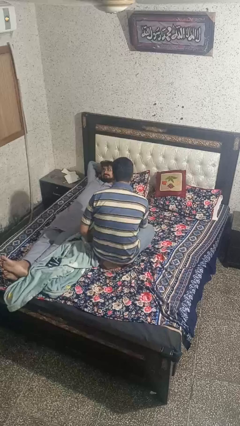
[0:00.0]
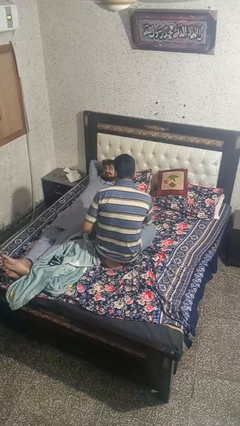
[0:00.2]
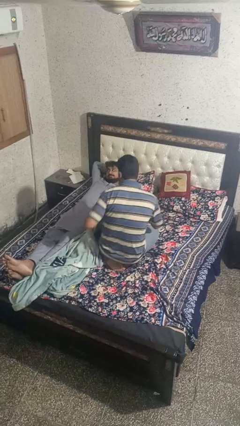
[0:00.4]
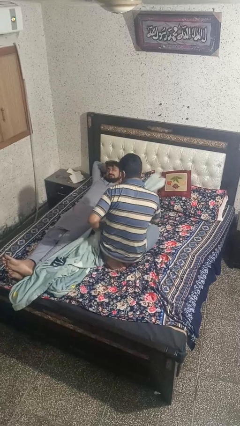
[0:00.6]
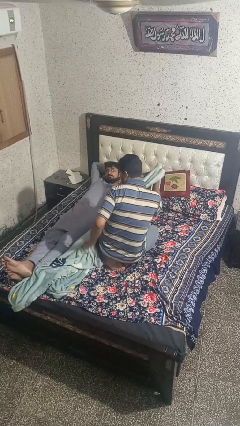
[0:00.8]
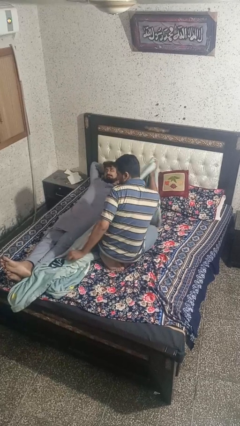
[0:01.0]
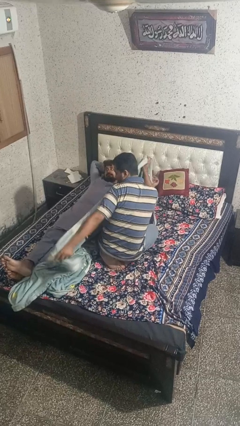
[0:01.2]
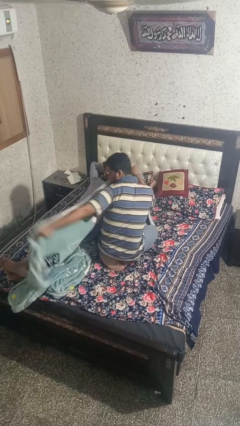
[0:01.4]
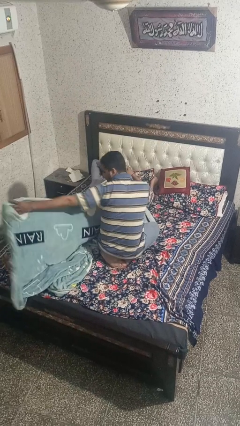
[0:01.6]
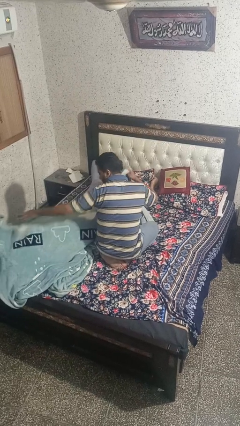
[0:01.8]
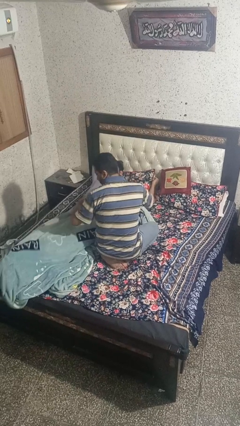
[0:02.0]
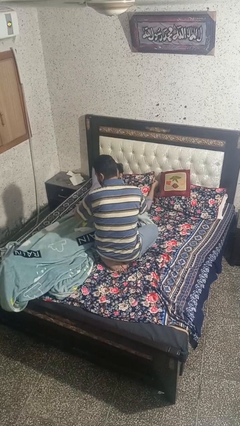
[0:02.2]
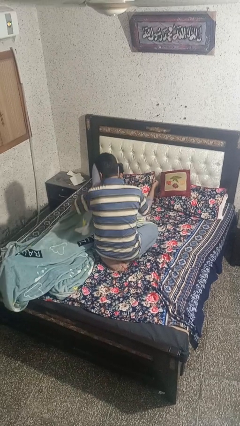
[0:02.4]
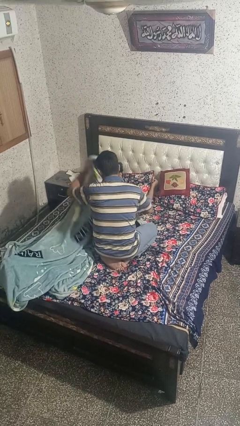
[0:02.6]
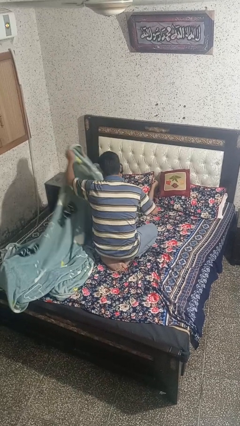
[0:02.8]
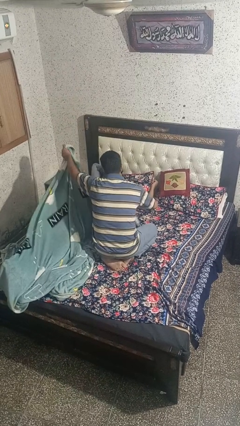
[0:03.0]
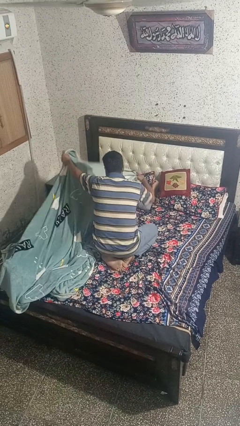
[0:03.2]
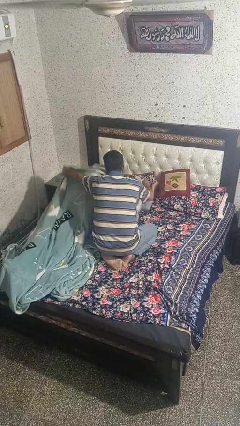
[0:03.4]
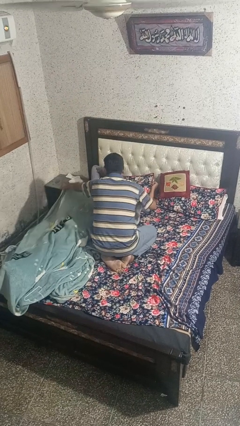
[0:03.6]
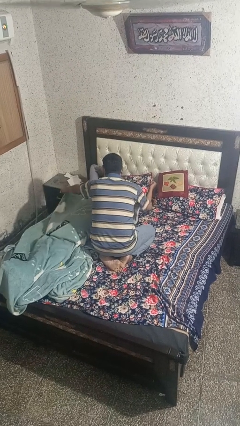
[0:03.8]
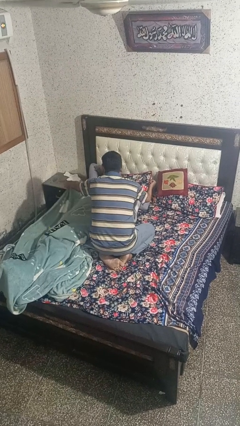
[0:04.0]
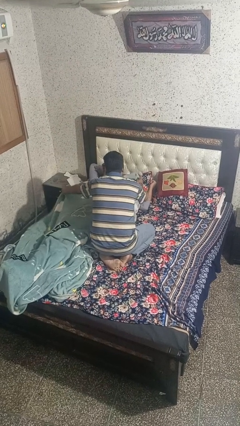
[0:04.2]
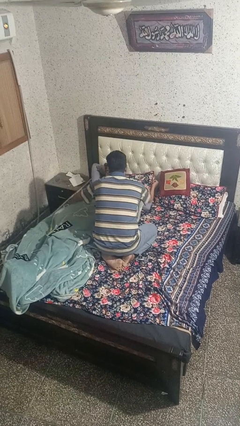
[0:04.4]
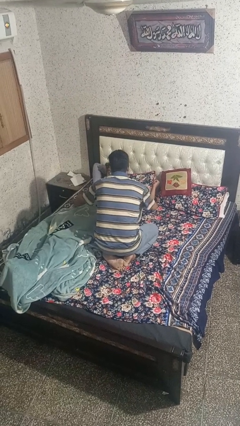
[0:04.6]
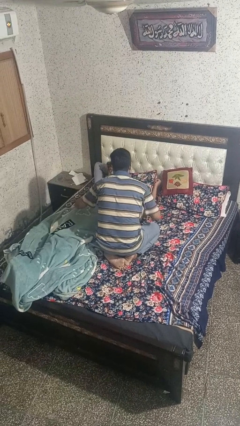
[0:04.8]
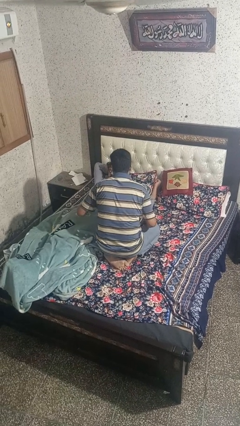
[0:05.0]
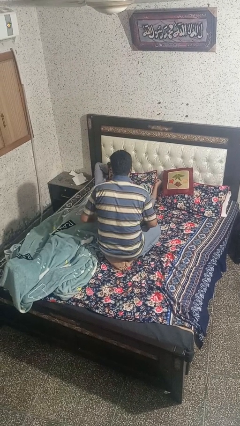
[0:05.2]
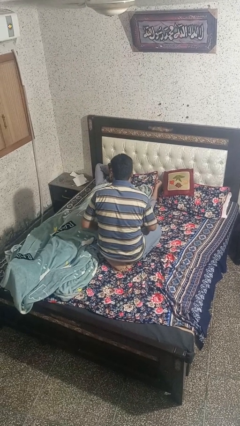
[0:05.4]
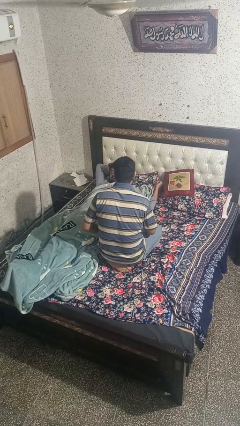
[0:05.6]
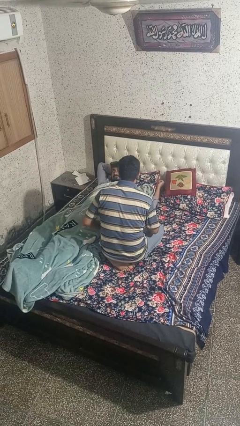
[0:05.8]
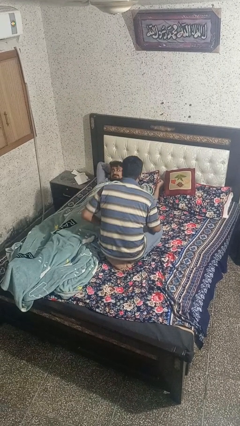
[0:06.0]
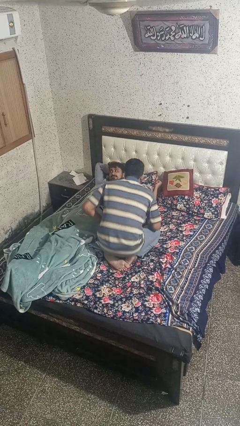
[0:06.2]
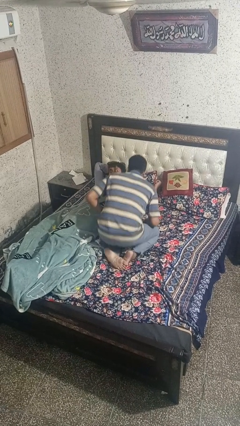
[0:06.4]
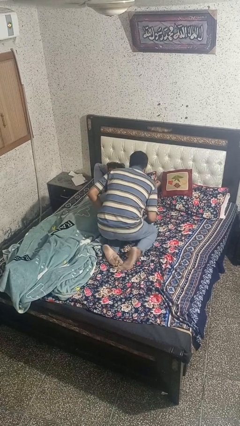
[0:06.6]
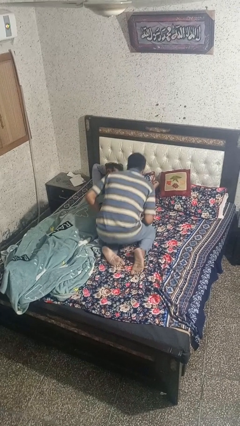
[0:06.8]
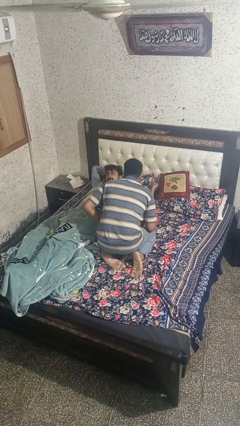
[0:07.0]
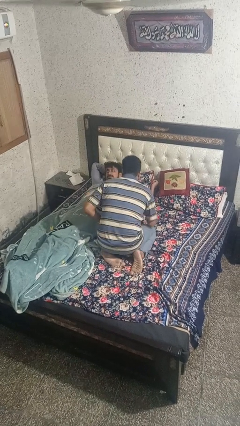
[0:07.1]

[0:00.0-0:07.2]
person covers friend with blanket

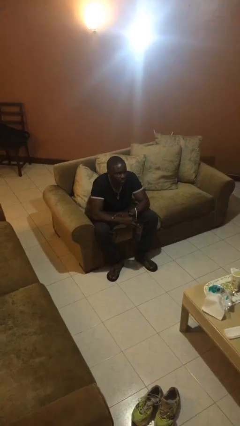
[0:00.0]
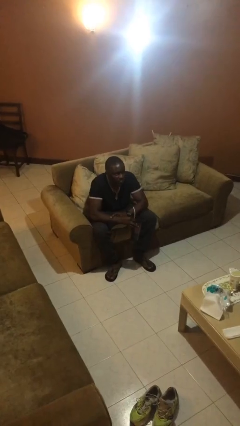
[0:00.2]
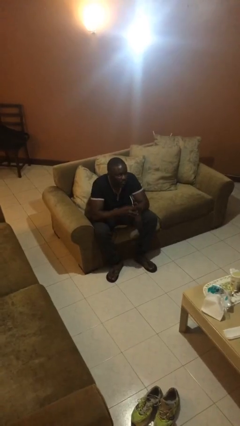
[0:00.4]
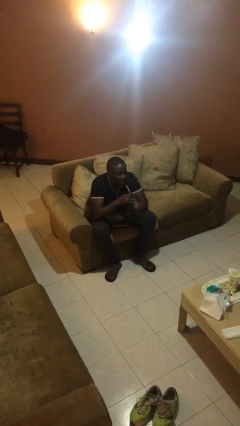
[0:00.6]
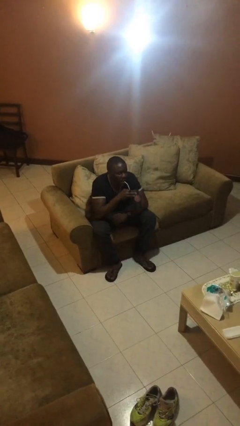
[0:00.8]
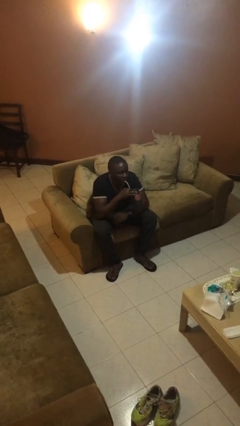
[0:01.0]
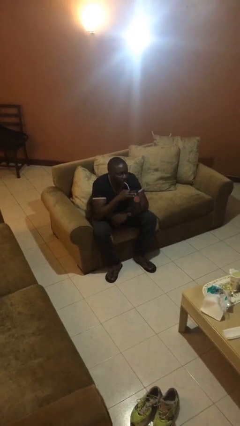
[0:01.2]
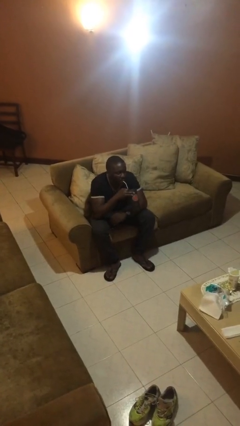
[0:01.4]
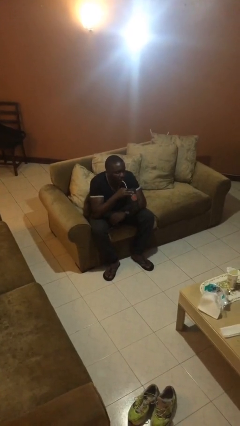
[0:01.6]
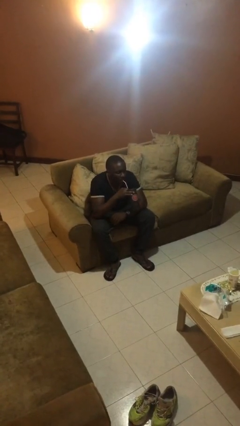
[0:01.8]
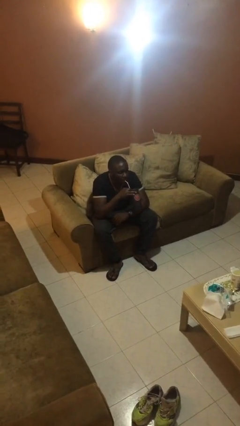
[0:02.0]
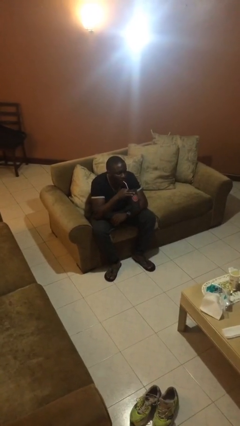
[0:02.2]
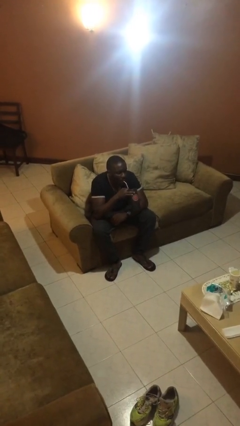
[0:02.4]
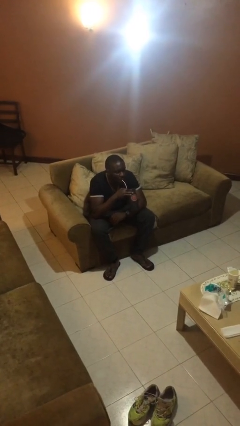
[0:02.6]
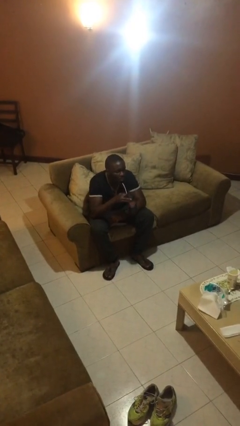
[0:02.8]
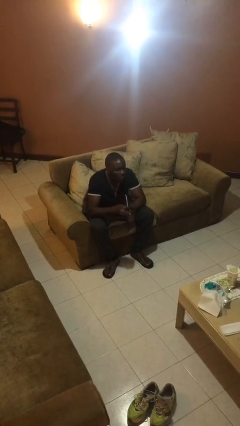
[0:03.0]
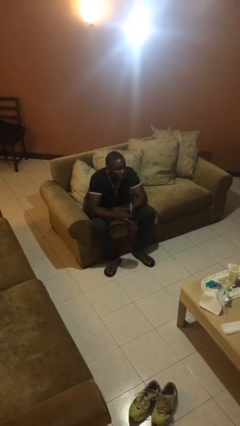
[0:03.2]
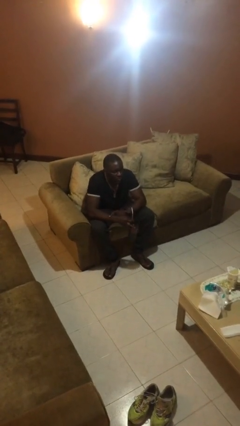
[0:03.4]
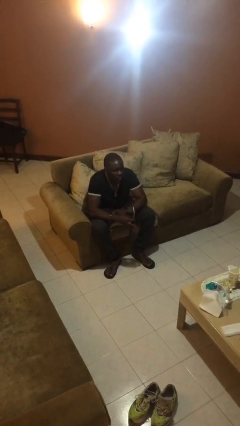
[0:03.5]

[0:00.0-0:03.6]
person drinks from straw

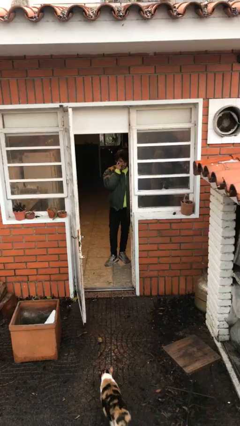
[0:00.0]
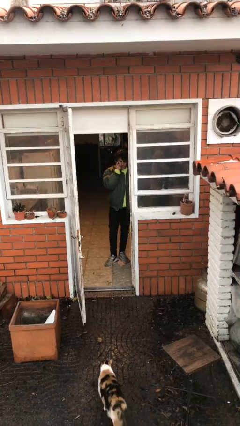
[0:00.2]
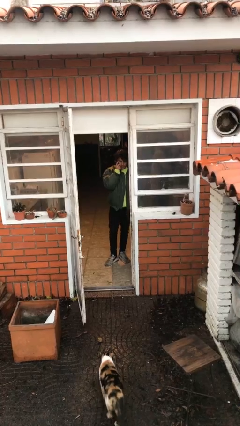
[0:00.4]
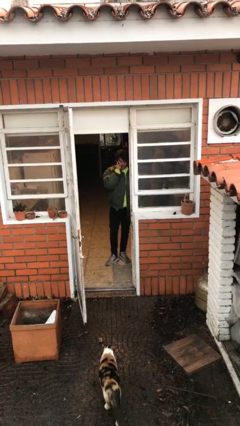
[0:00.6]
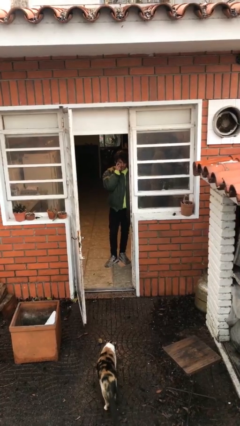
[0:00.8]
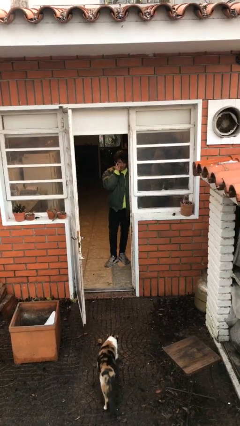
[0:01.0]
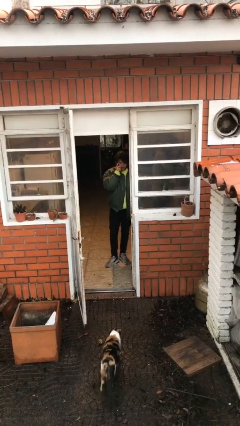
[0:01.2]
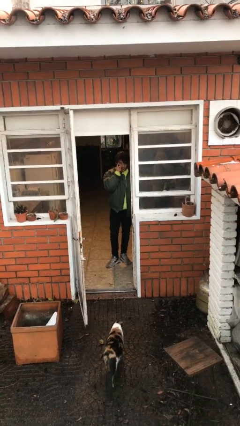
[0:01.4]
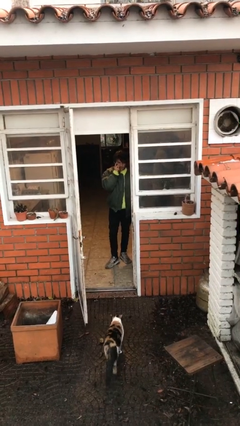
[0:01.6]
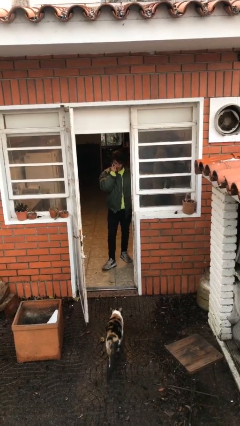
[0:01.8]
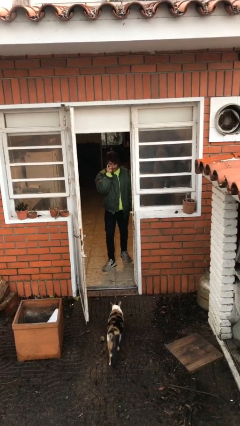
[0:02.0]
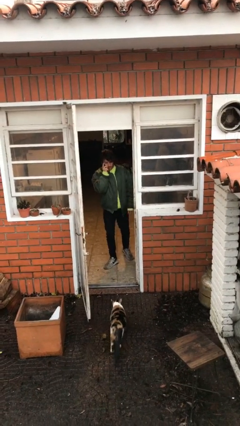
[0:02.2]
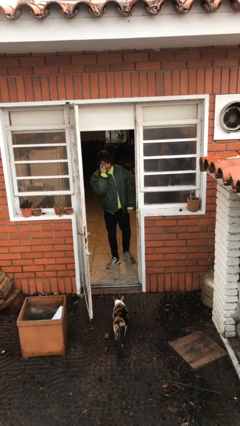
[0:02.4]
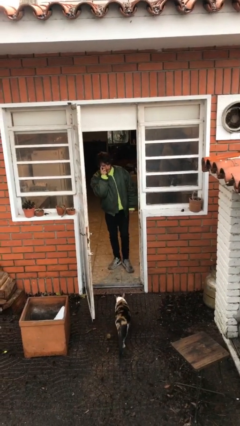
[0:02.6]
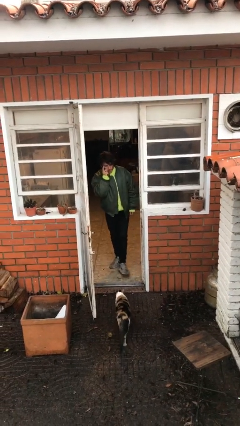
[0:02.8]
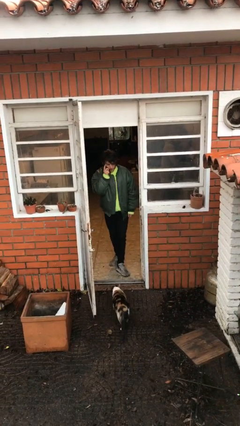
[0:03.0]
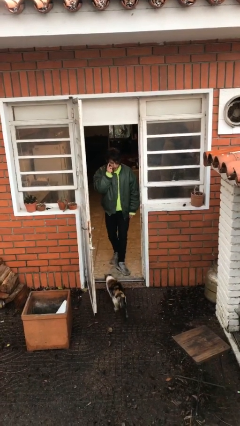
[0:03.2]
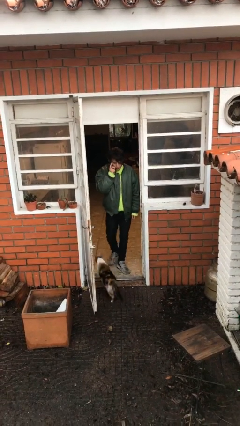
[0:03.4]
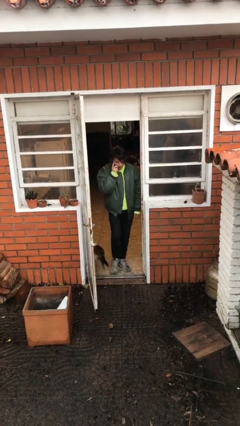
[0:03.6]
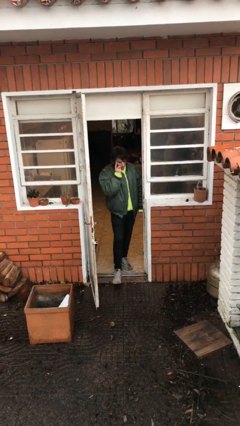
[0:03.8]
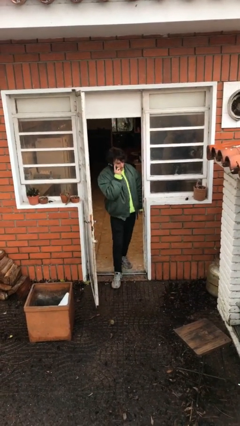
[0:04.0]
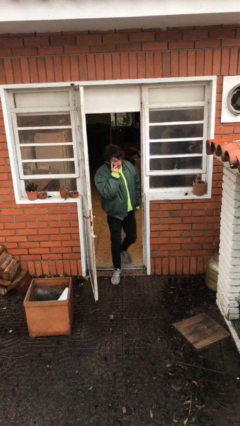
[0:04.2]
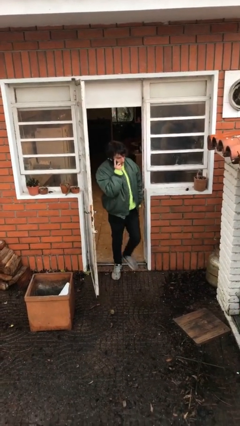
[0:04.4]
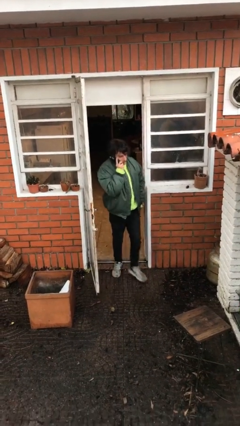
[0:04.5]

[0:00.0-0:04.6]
person enters scene through structure

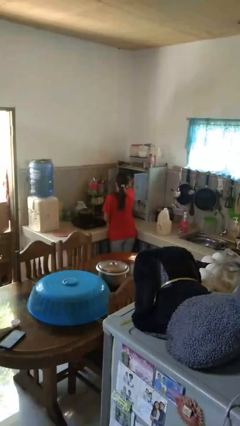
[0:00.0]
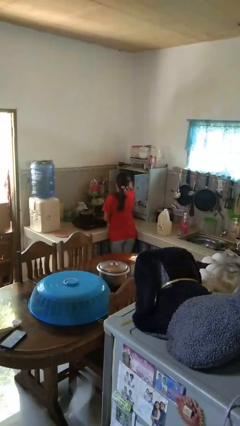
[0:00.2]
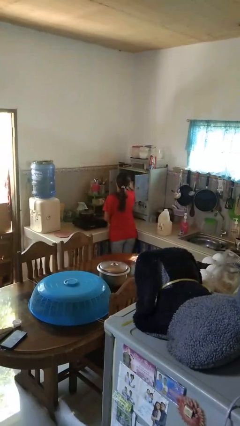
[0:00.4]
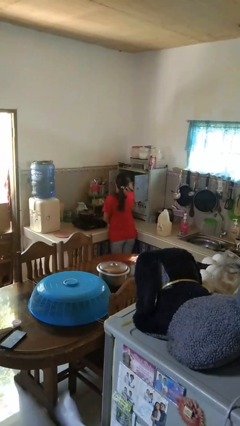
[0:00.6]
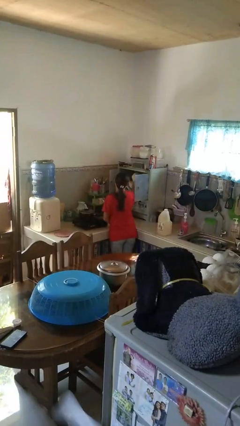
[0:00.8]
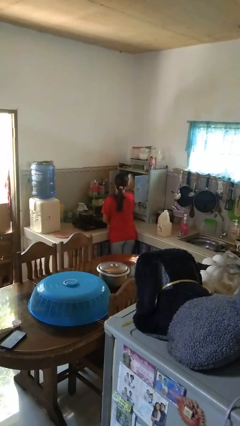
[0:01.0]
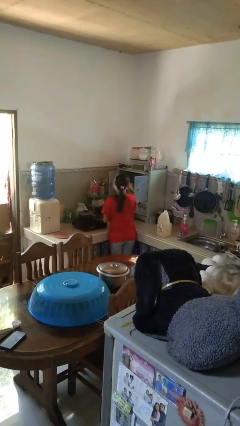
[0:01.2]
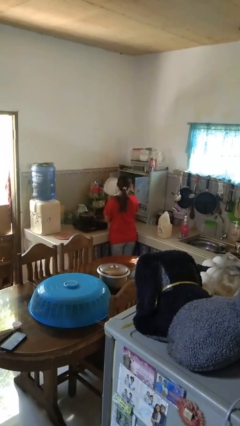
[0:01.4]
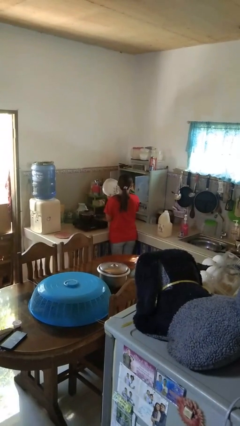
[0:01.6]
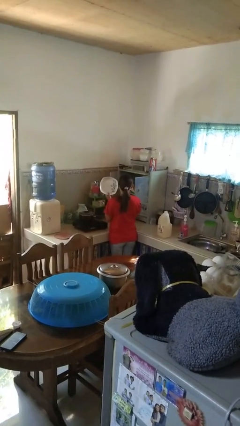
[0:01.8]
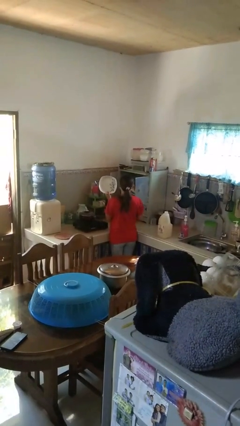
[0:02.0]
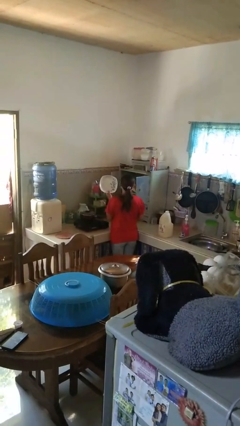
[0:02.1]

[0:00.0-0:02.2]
person takes object from cabinet
